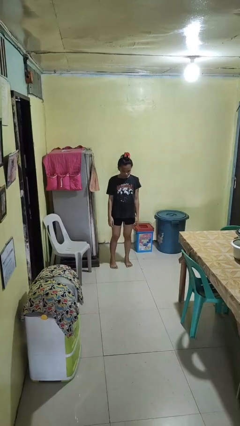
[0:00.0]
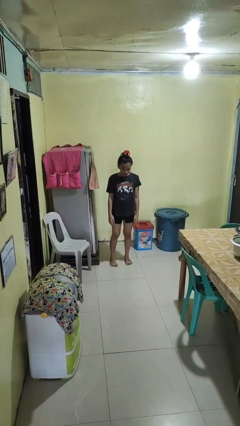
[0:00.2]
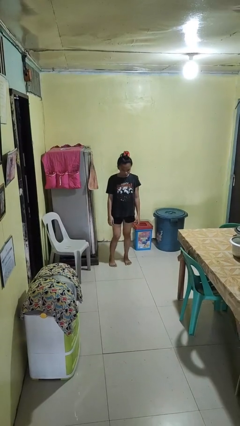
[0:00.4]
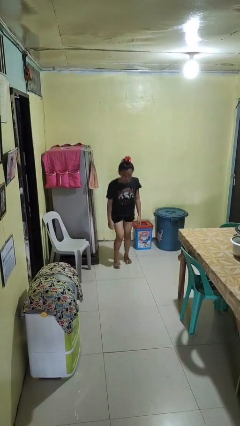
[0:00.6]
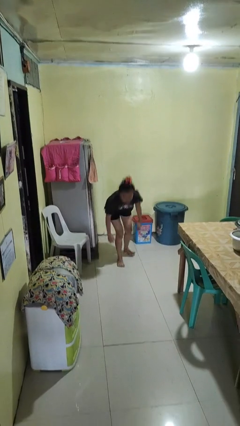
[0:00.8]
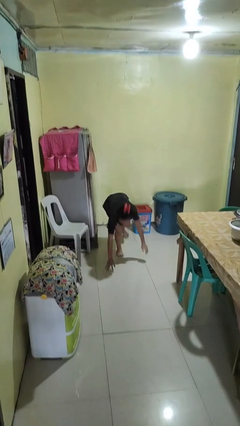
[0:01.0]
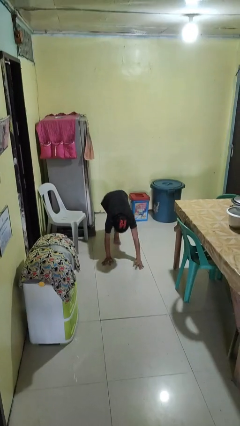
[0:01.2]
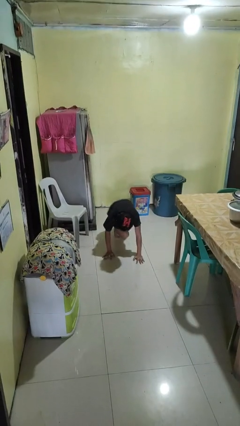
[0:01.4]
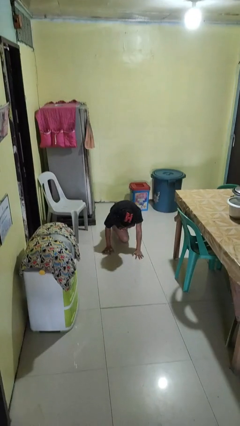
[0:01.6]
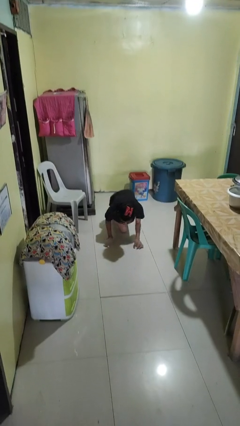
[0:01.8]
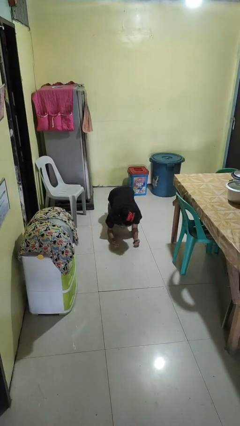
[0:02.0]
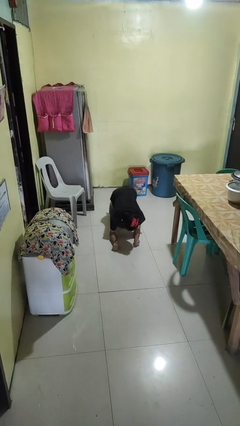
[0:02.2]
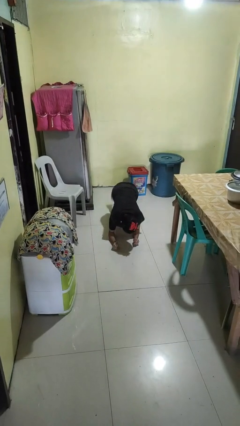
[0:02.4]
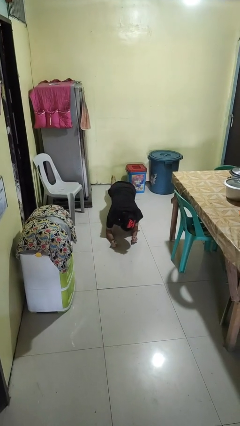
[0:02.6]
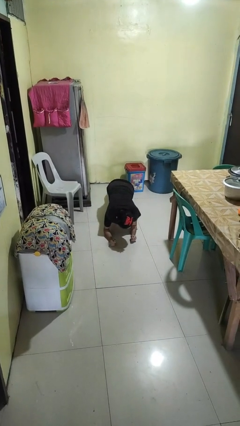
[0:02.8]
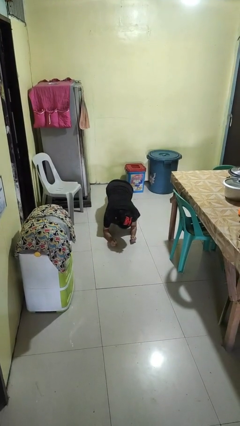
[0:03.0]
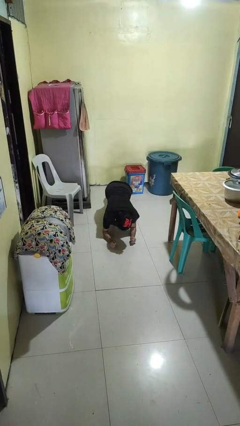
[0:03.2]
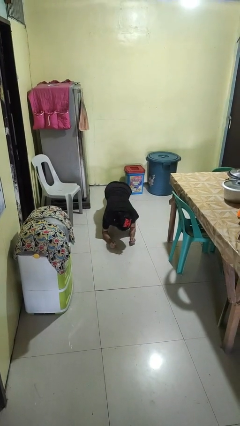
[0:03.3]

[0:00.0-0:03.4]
person exercises with plank

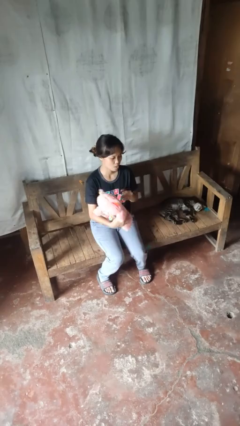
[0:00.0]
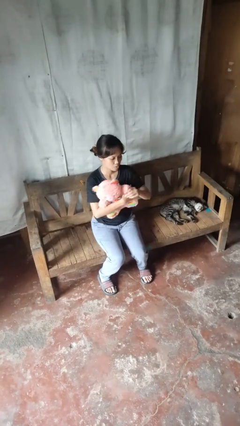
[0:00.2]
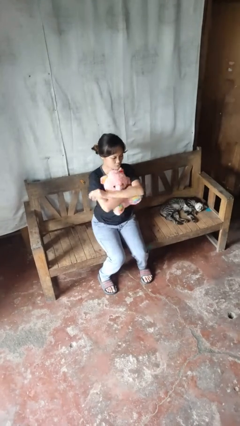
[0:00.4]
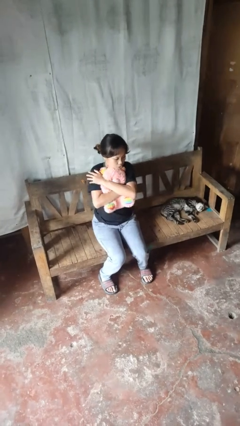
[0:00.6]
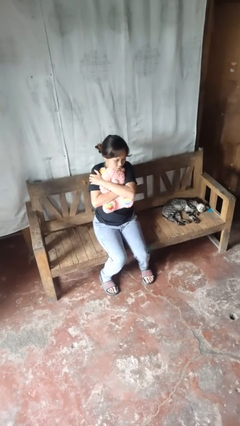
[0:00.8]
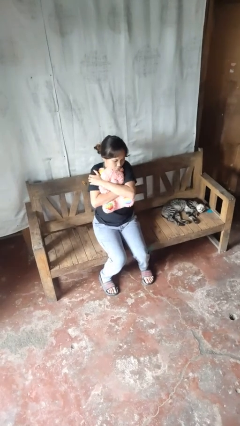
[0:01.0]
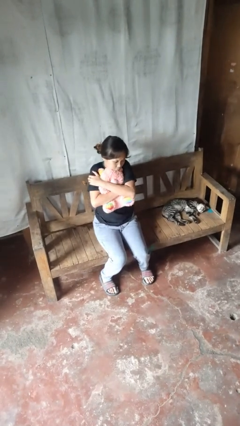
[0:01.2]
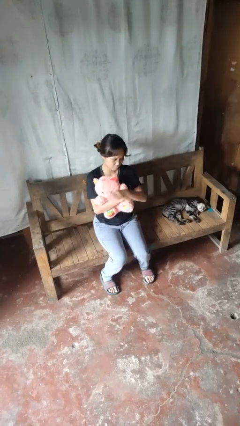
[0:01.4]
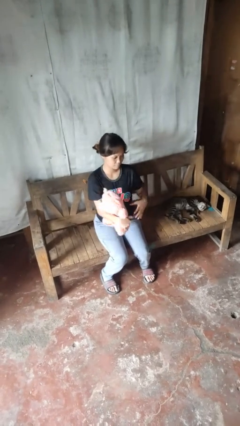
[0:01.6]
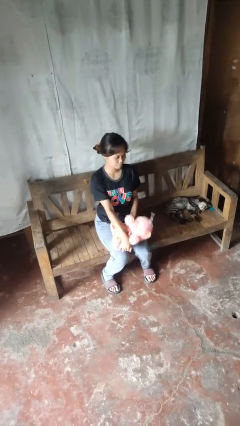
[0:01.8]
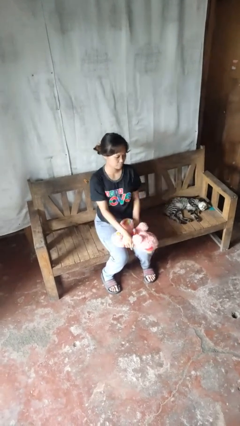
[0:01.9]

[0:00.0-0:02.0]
person hugs stuffed animal

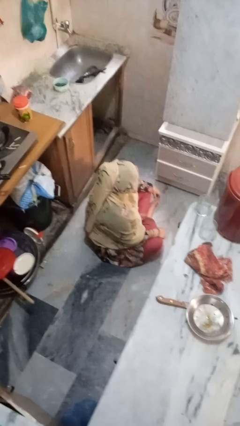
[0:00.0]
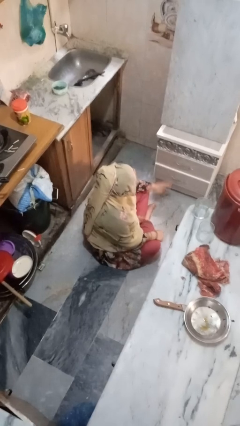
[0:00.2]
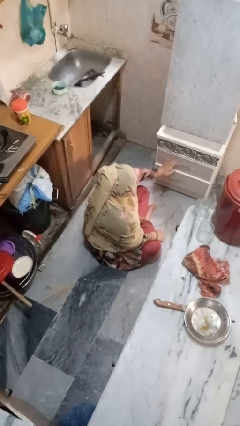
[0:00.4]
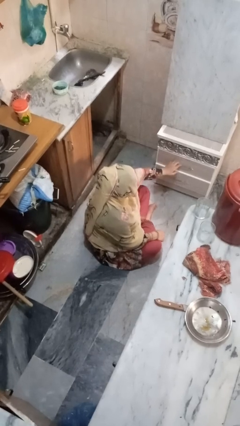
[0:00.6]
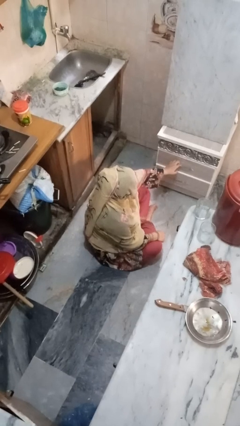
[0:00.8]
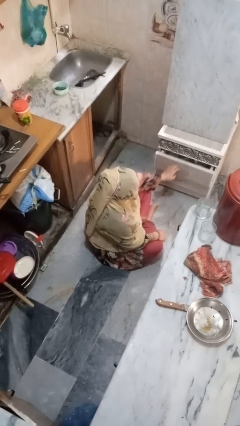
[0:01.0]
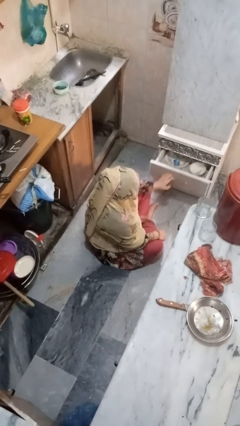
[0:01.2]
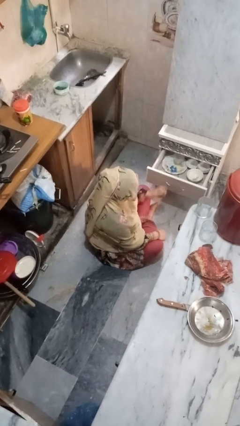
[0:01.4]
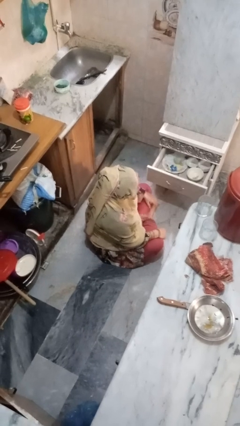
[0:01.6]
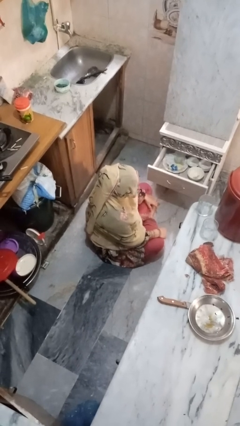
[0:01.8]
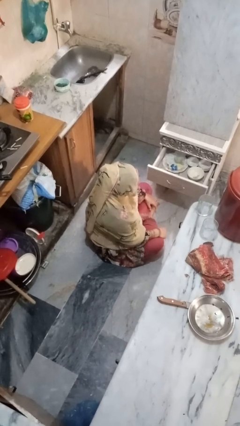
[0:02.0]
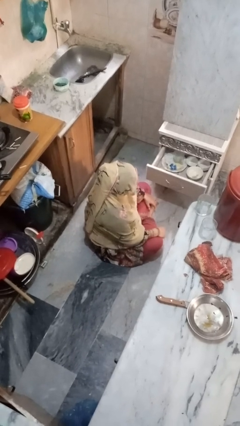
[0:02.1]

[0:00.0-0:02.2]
person opens kitchen drawer

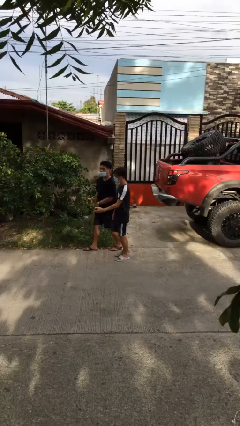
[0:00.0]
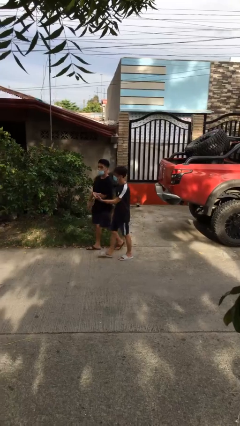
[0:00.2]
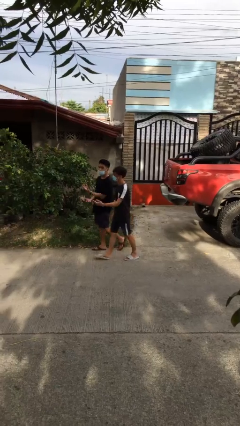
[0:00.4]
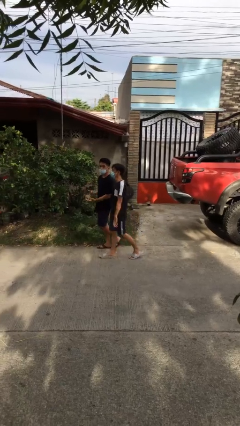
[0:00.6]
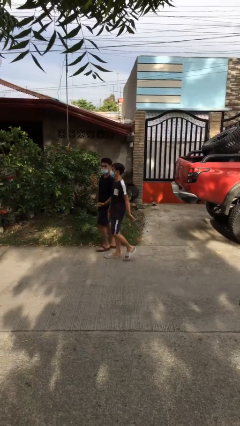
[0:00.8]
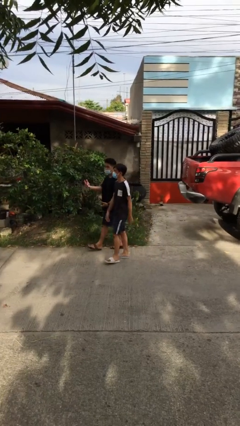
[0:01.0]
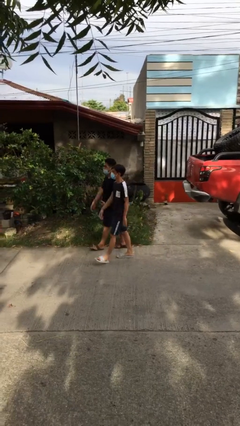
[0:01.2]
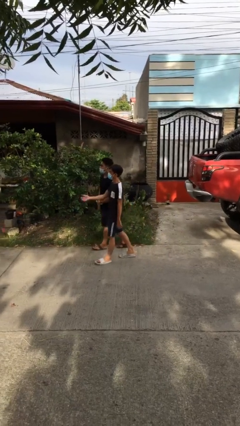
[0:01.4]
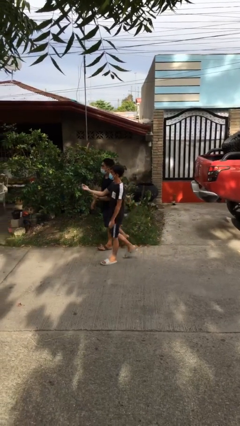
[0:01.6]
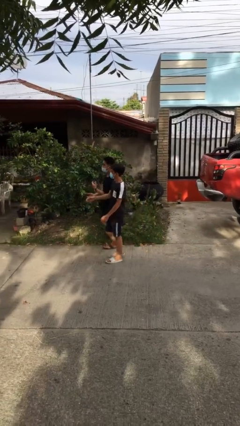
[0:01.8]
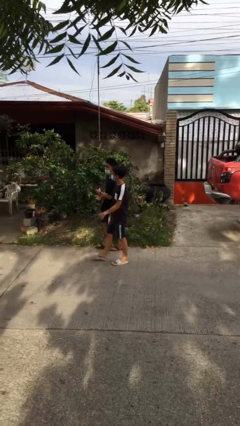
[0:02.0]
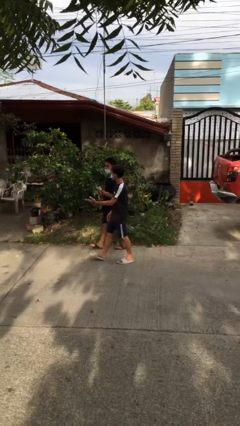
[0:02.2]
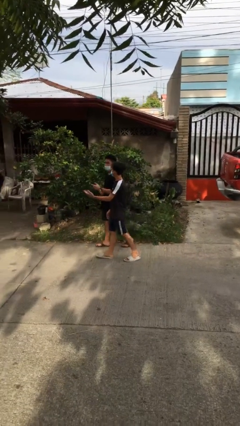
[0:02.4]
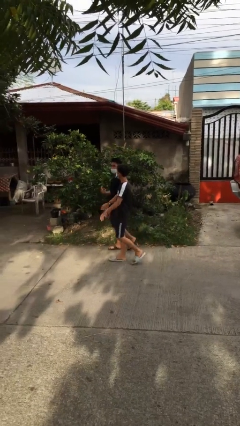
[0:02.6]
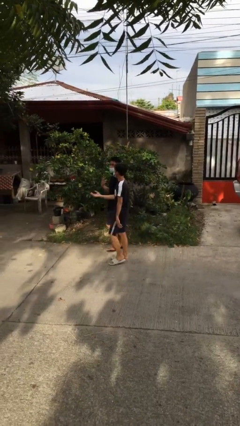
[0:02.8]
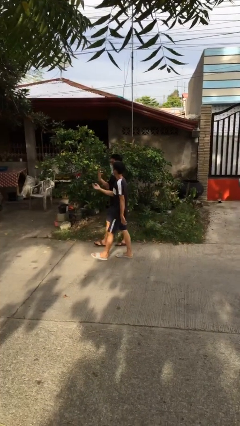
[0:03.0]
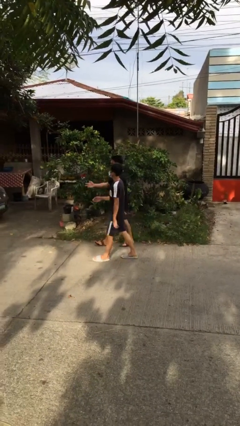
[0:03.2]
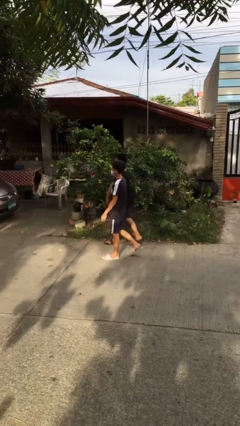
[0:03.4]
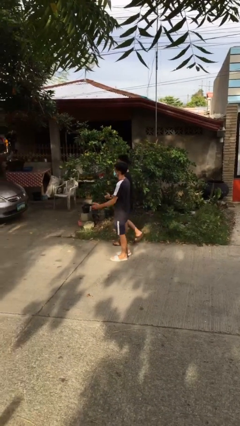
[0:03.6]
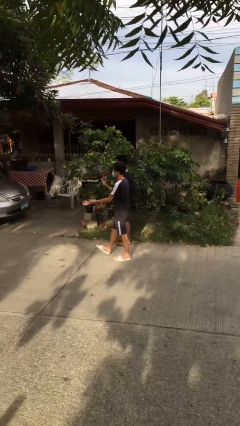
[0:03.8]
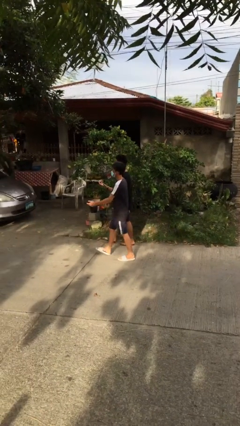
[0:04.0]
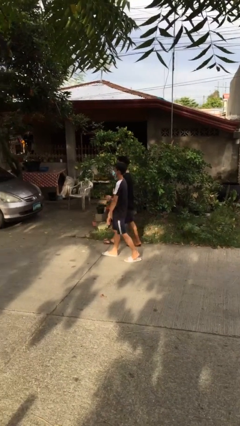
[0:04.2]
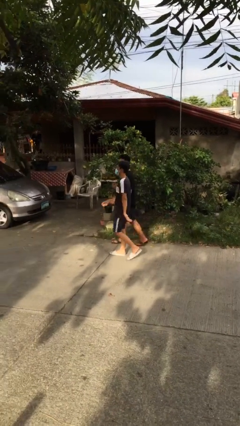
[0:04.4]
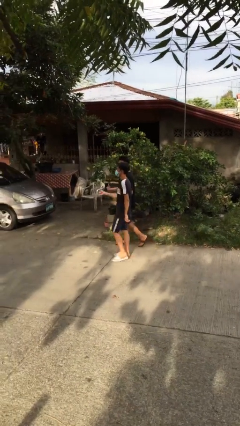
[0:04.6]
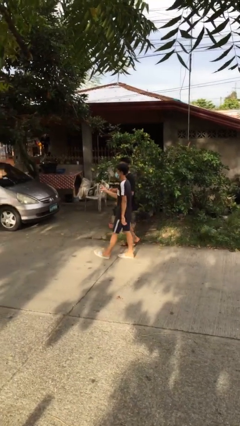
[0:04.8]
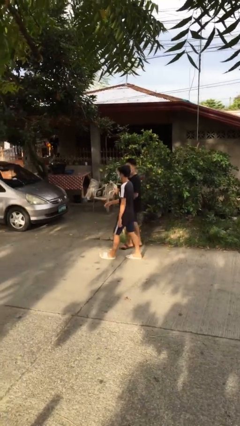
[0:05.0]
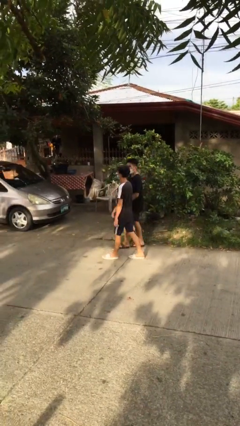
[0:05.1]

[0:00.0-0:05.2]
person talks to person

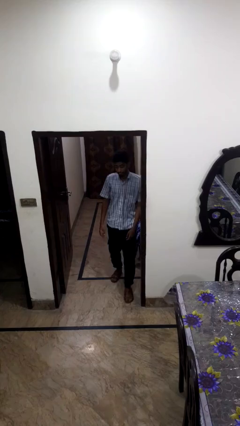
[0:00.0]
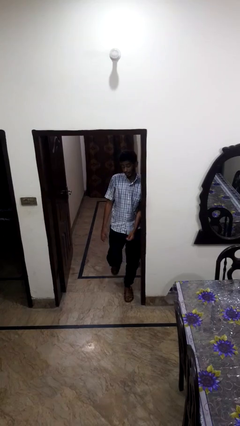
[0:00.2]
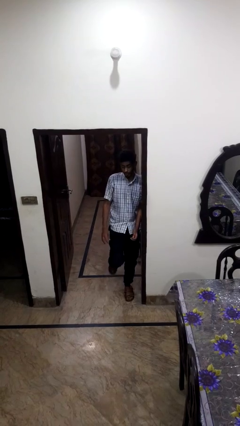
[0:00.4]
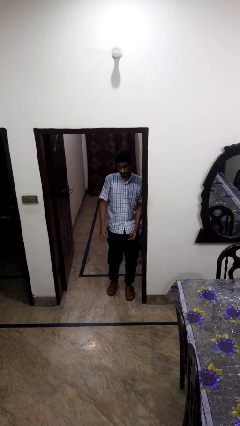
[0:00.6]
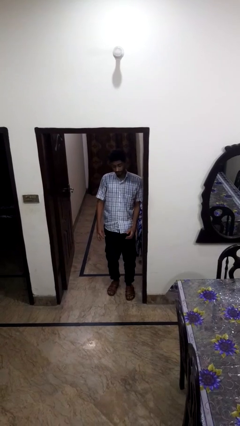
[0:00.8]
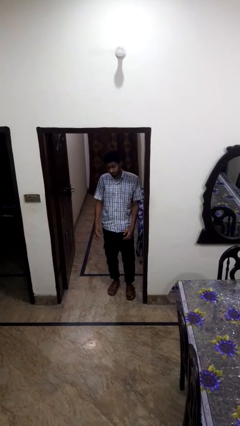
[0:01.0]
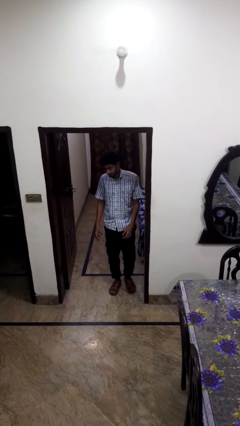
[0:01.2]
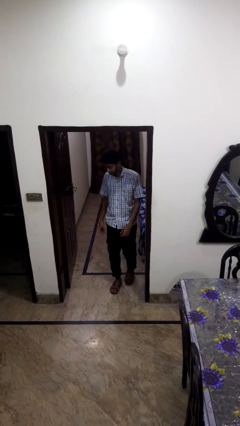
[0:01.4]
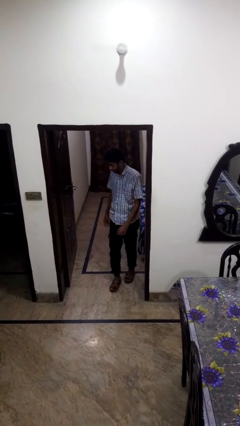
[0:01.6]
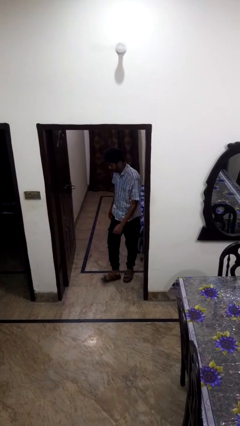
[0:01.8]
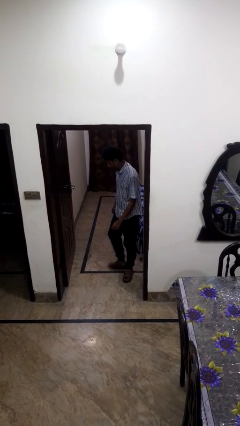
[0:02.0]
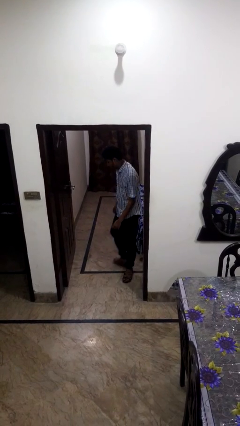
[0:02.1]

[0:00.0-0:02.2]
person bumps into wall

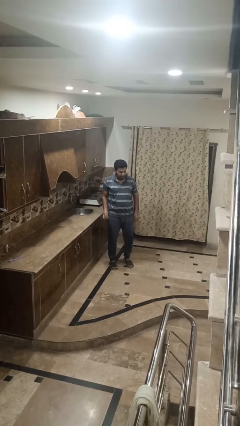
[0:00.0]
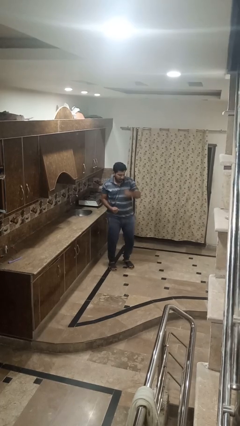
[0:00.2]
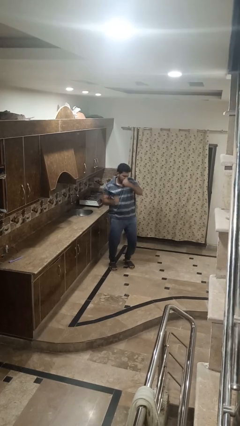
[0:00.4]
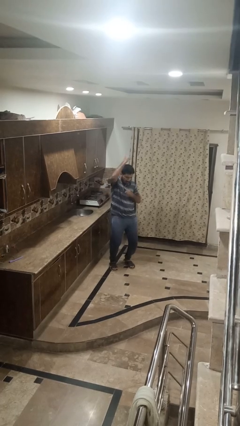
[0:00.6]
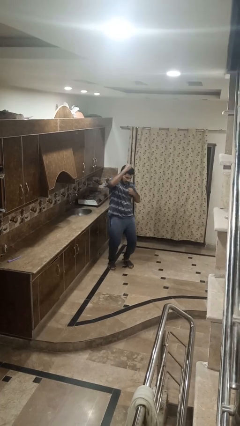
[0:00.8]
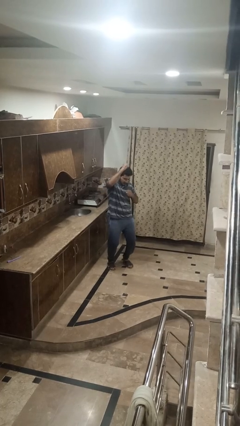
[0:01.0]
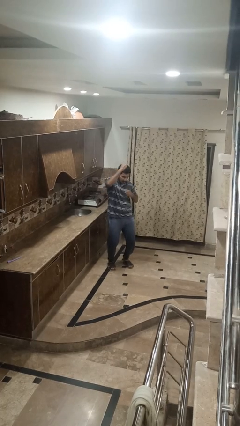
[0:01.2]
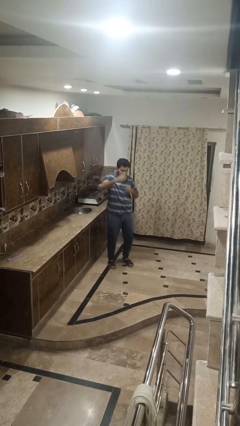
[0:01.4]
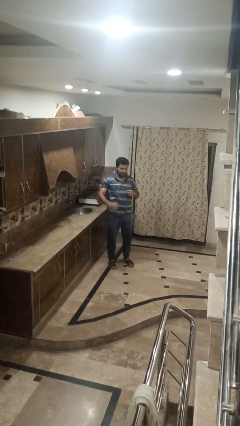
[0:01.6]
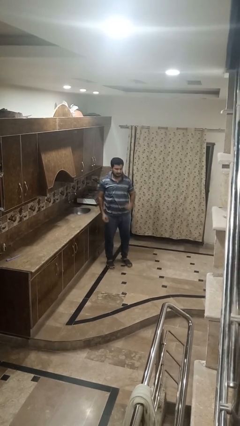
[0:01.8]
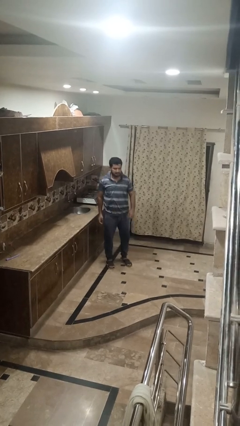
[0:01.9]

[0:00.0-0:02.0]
person punches
